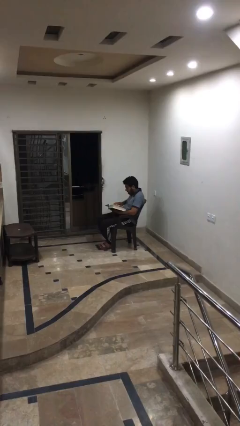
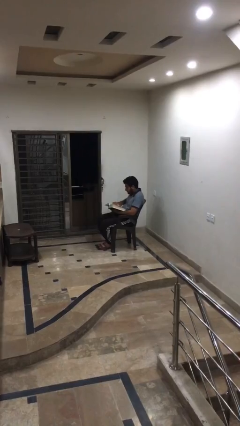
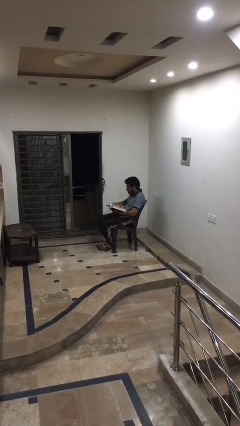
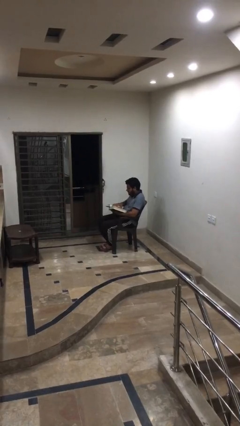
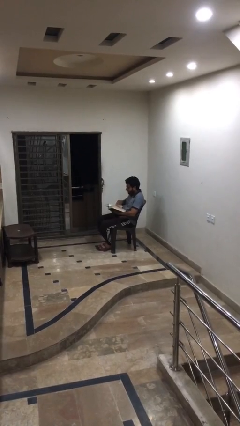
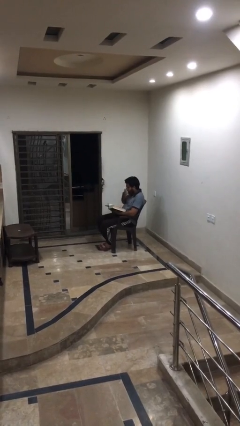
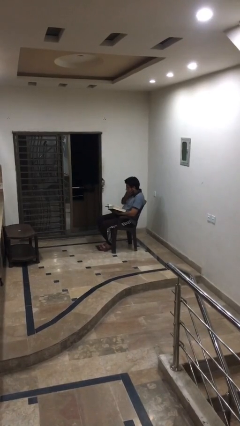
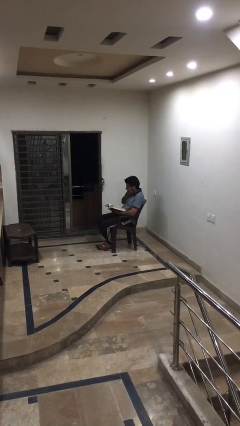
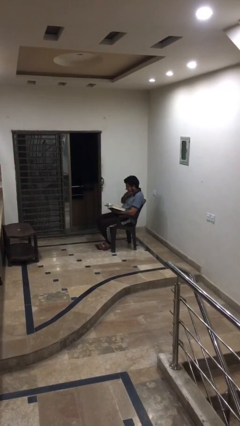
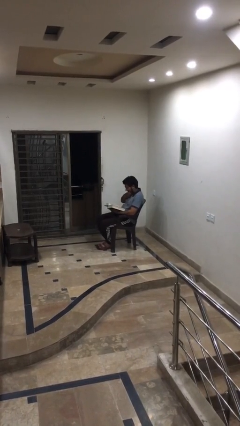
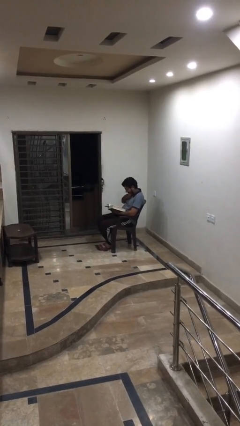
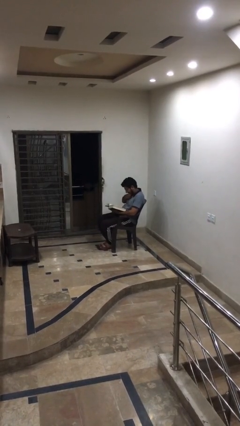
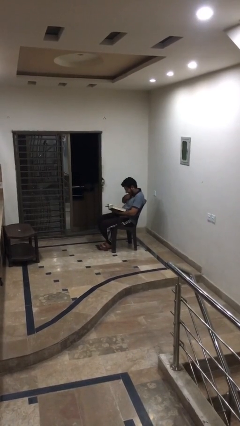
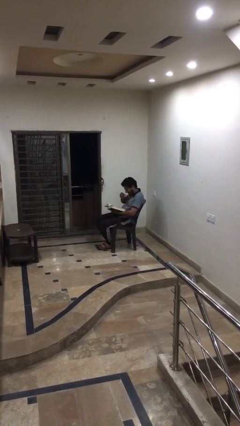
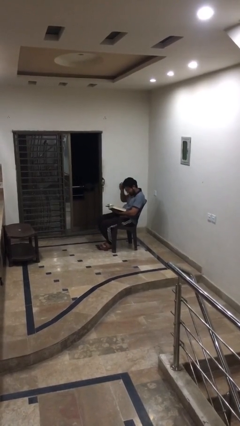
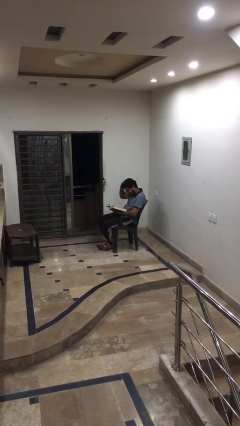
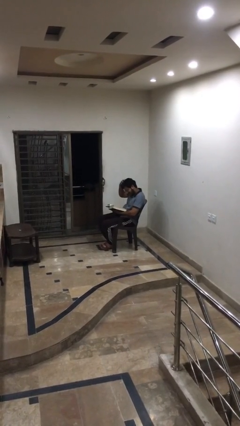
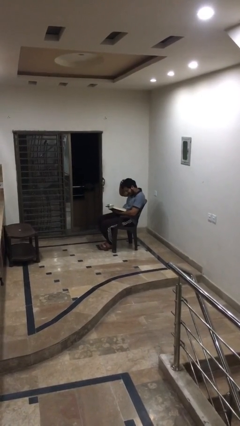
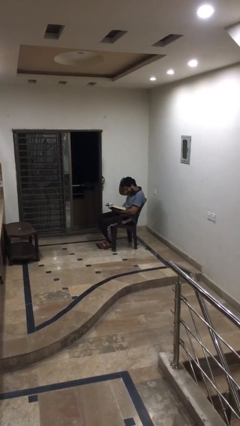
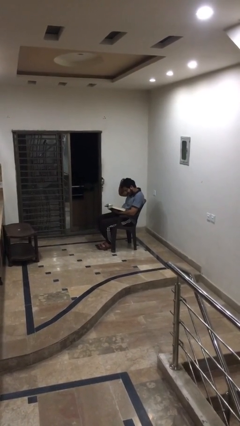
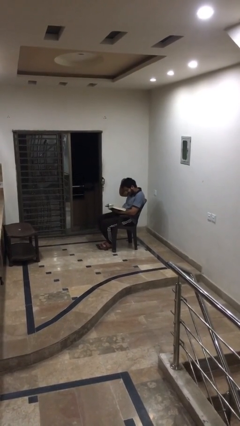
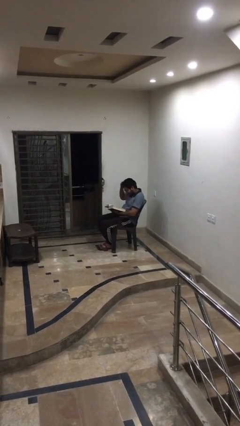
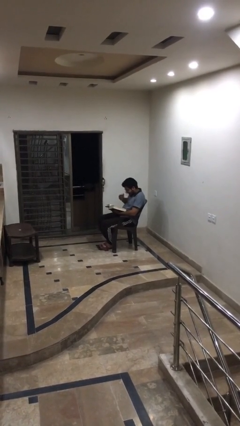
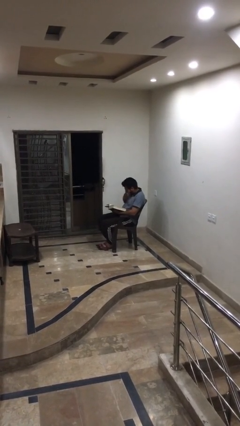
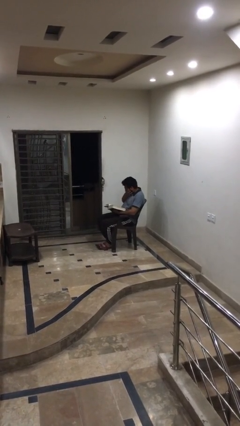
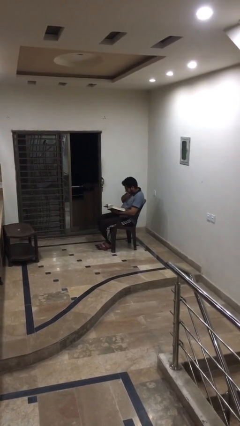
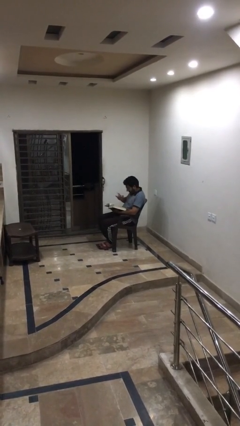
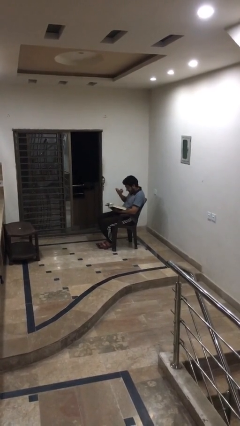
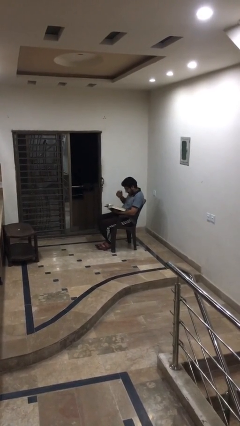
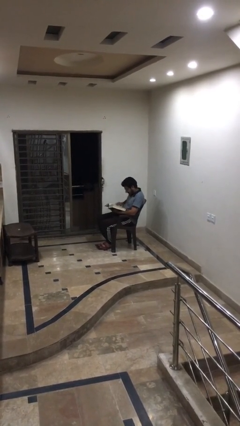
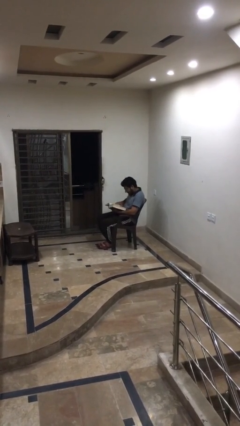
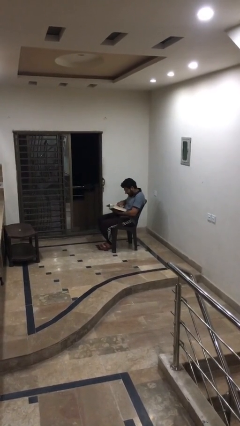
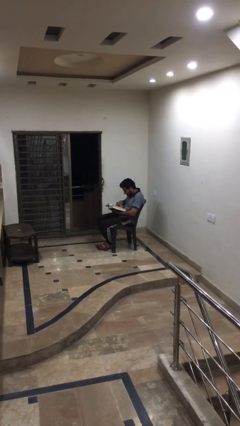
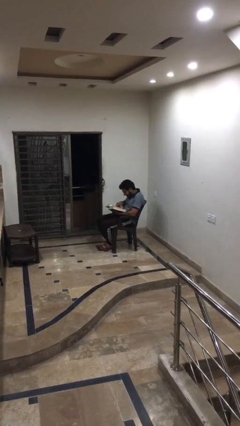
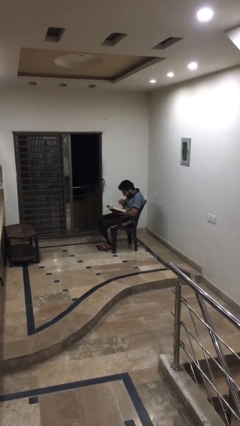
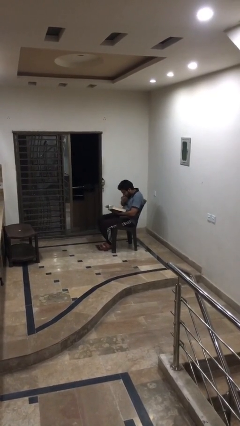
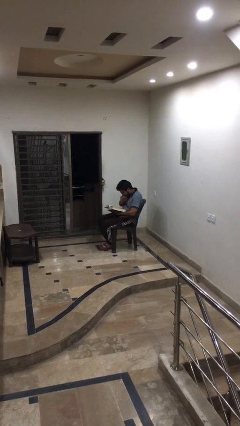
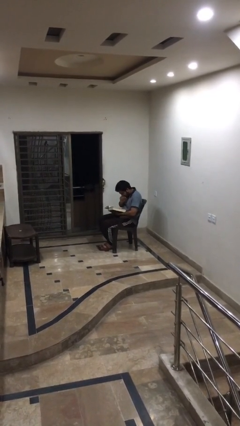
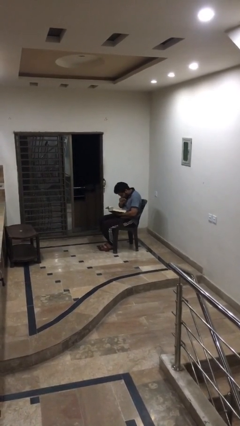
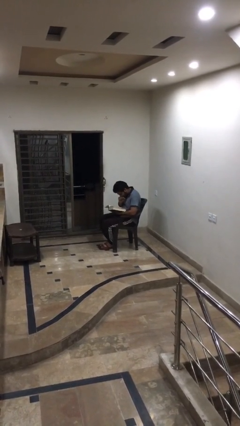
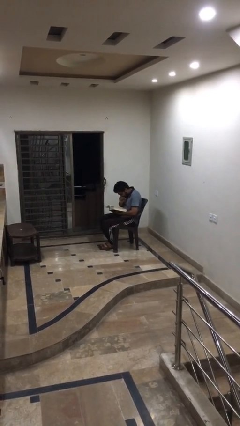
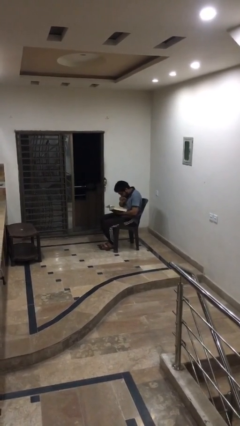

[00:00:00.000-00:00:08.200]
person reads document

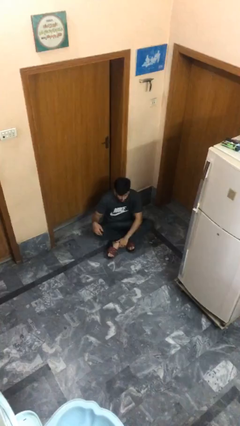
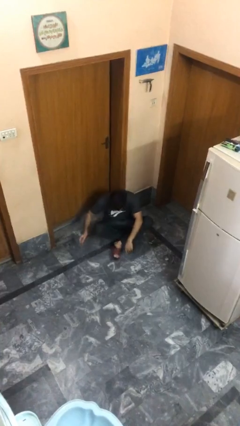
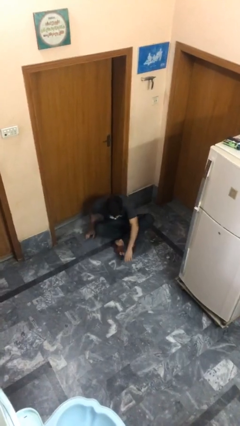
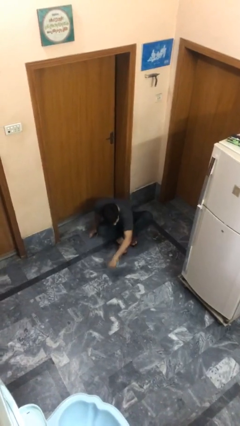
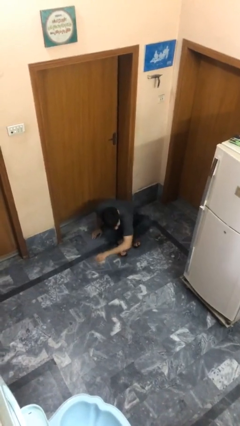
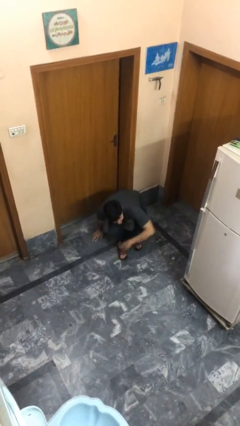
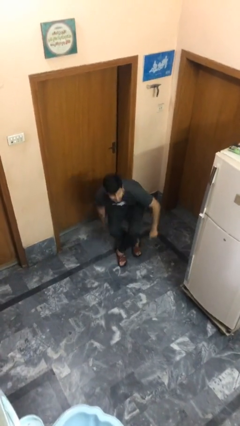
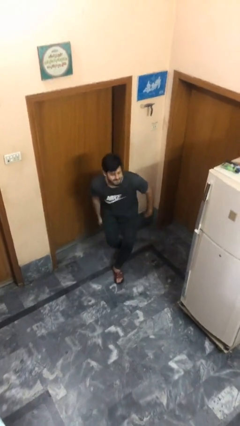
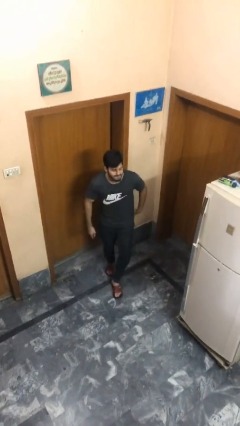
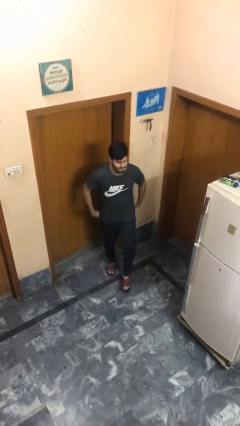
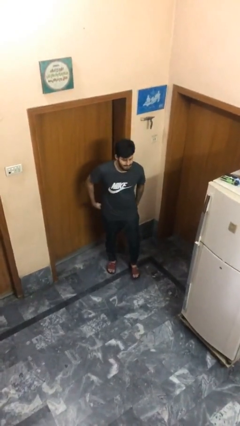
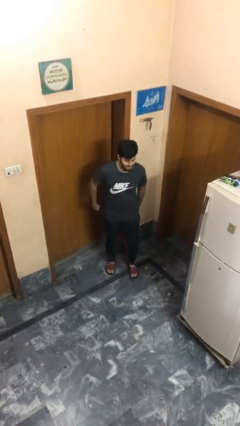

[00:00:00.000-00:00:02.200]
person stands up from floor

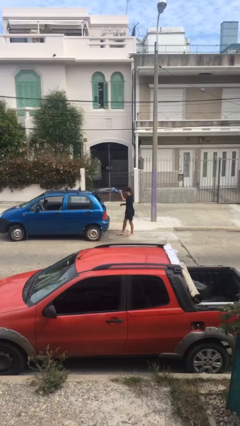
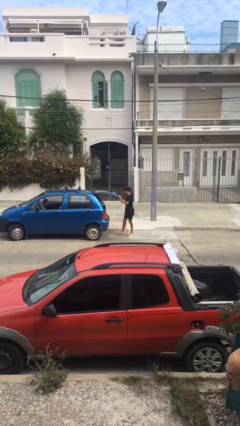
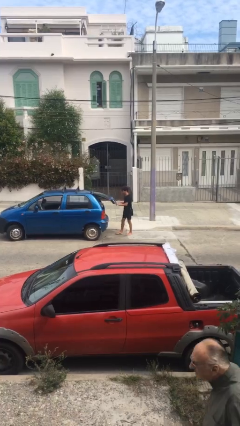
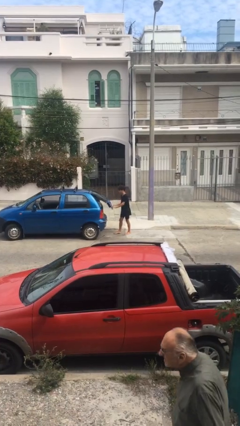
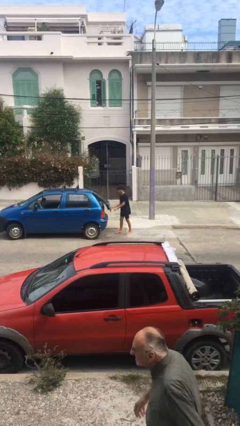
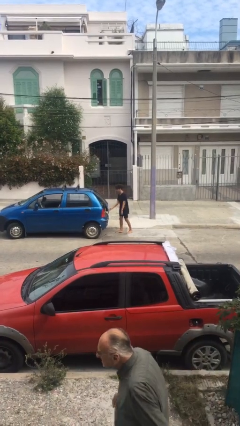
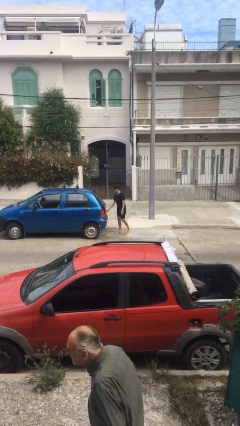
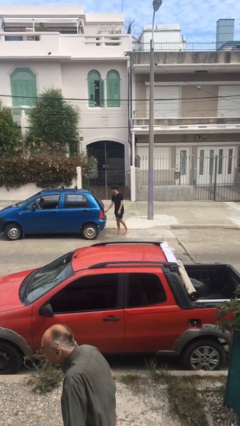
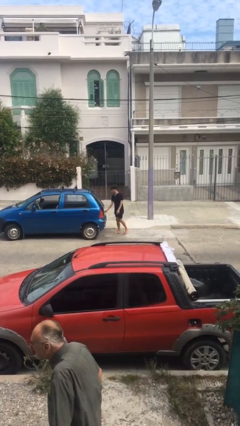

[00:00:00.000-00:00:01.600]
person closes car trunk

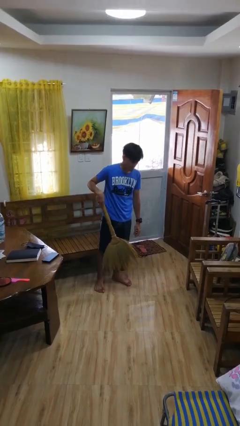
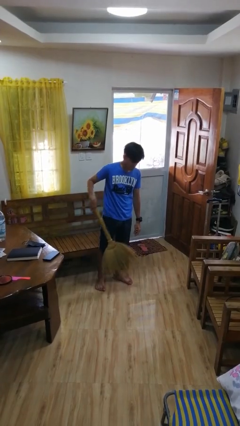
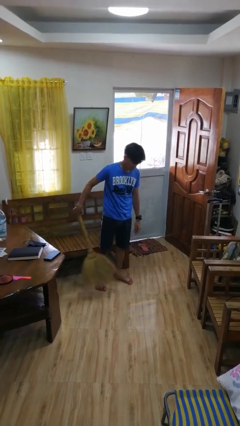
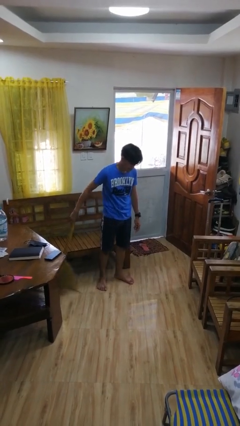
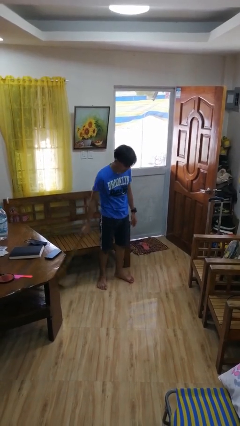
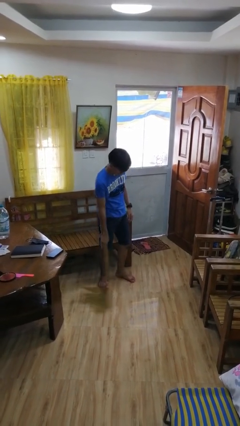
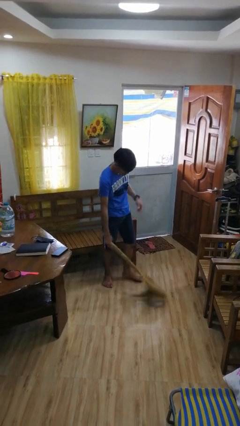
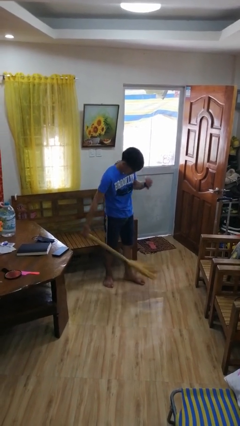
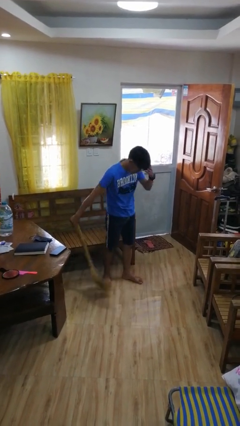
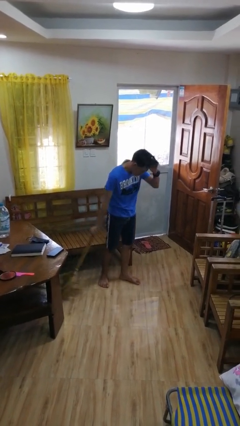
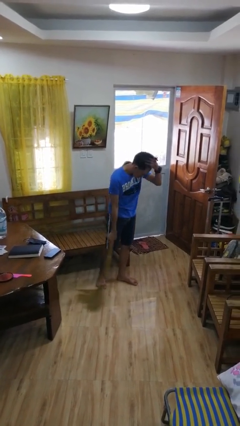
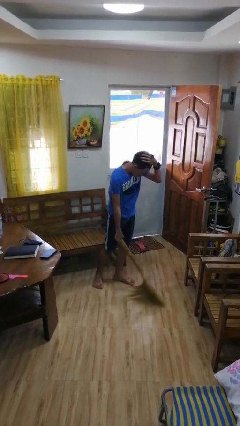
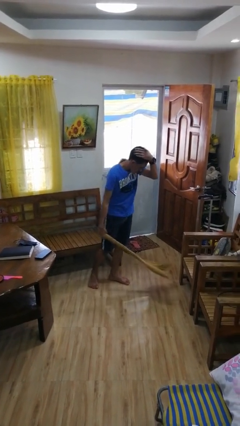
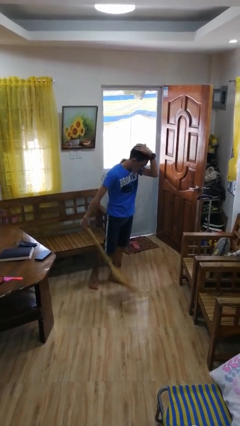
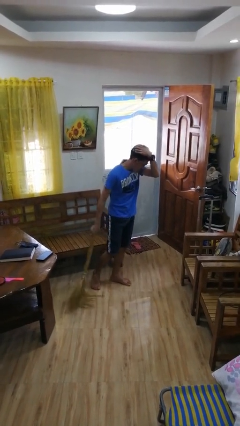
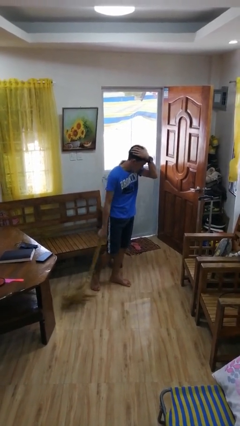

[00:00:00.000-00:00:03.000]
person sweeps floor

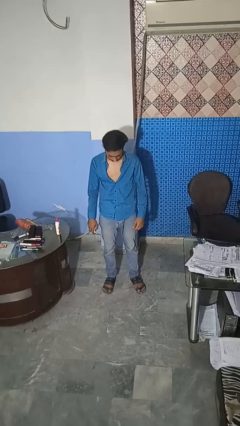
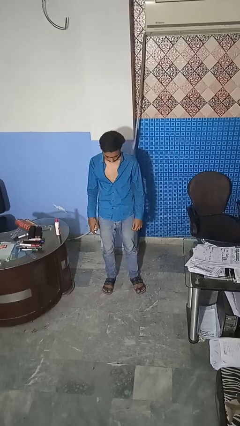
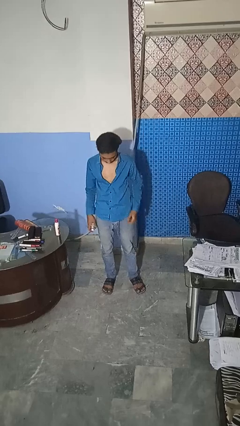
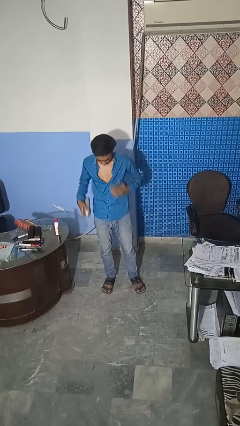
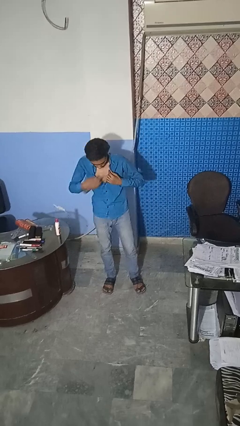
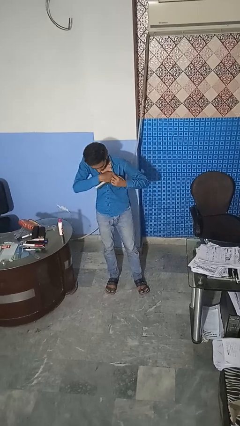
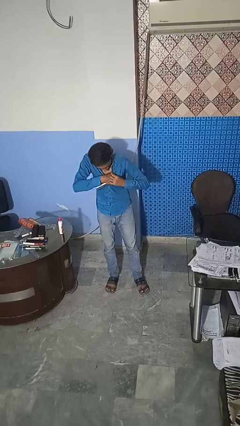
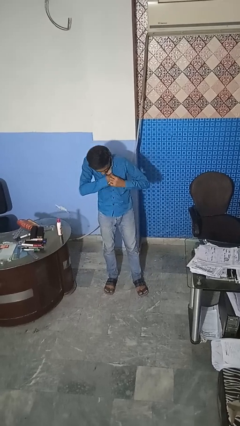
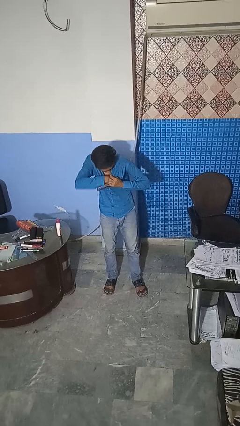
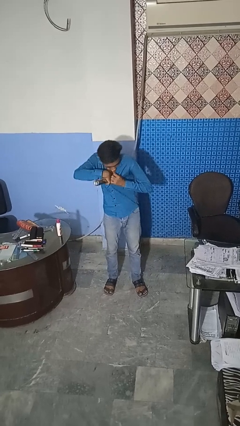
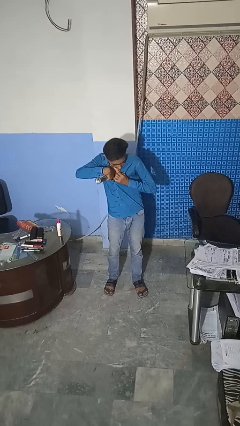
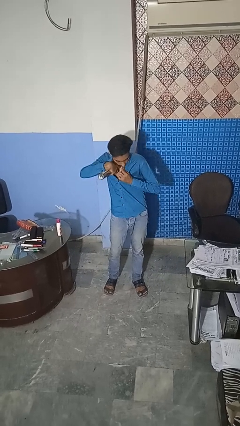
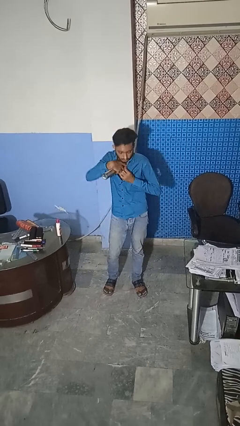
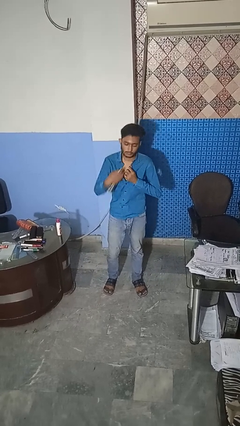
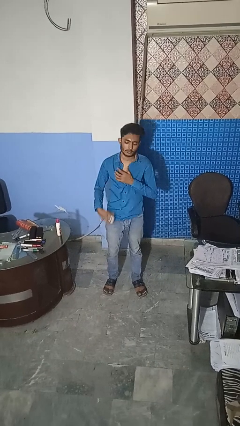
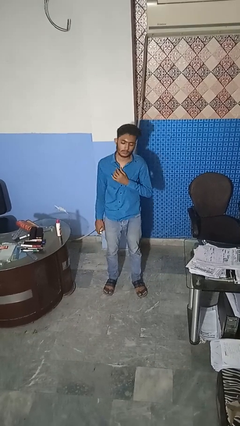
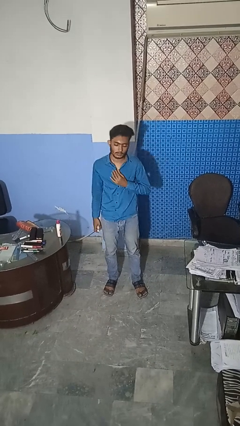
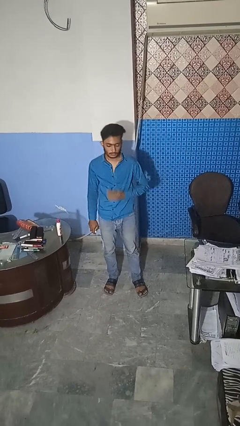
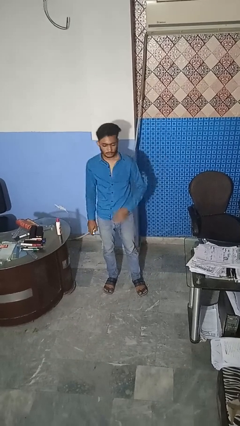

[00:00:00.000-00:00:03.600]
person applies deodorant
